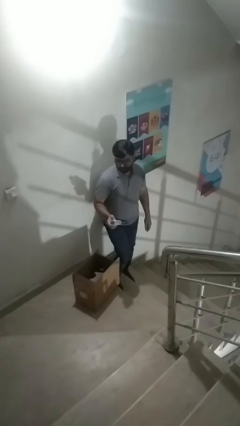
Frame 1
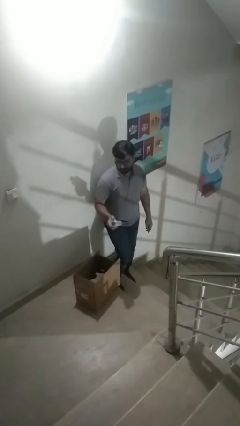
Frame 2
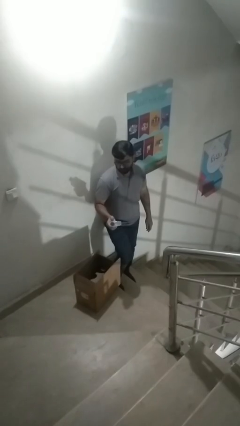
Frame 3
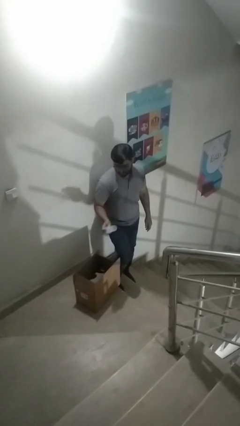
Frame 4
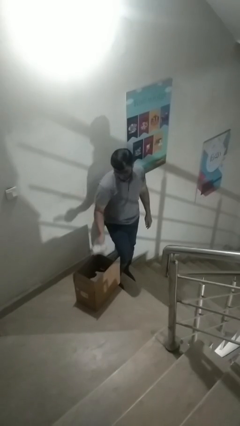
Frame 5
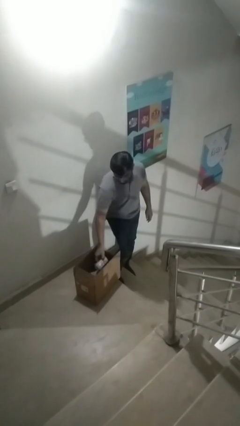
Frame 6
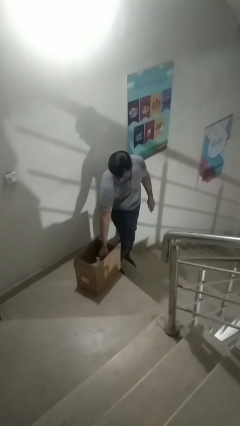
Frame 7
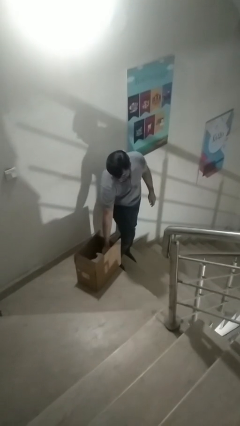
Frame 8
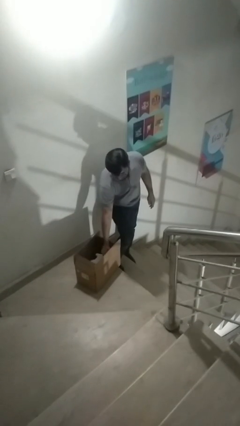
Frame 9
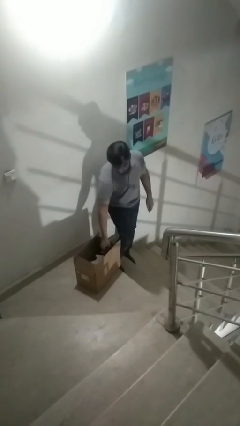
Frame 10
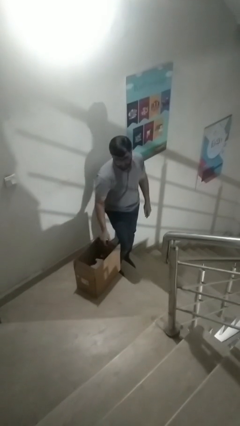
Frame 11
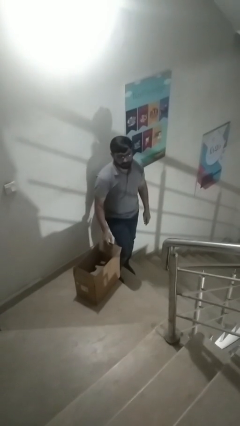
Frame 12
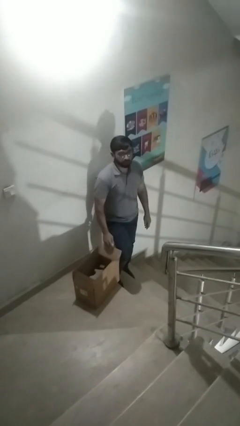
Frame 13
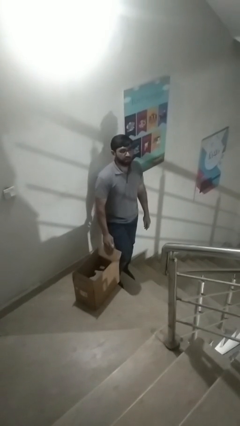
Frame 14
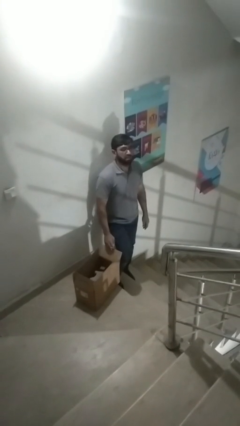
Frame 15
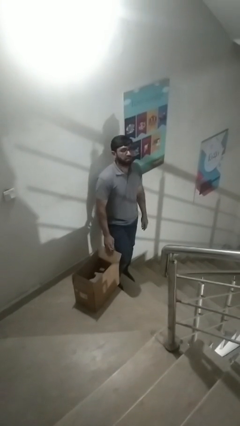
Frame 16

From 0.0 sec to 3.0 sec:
person puts object into box

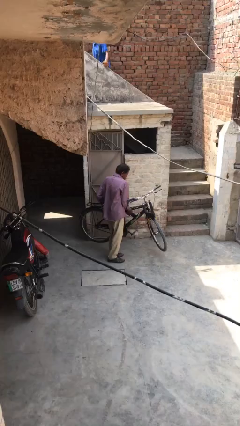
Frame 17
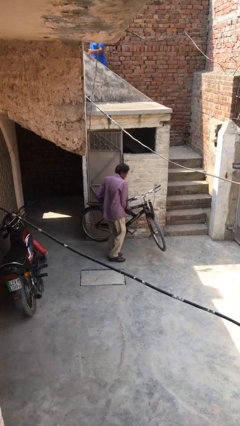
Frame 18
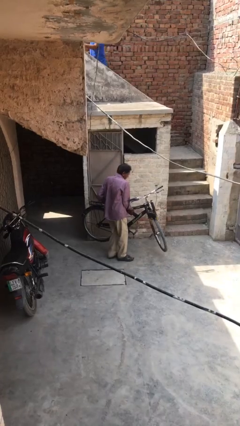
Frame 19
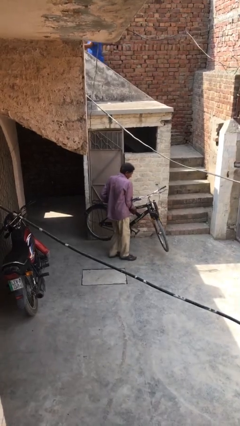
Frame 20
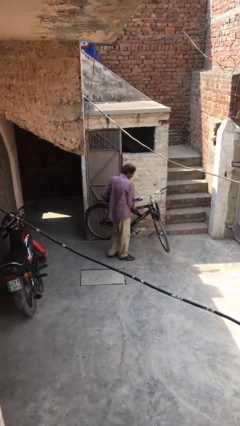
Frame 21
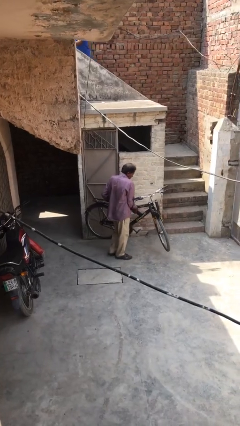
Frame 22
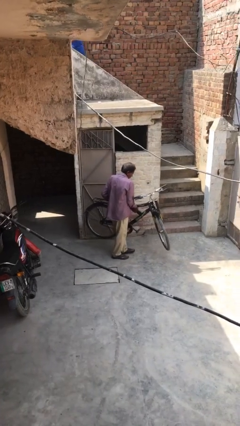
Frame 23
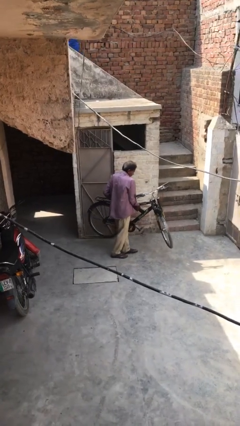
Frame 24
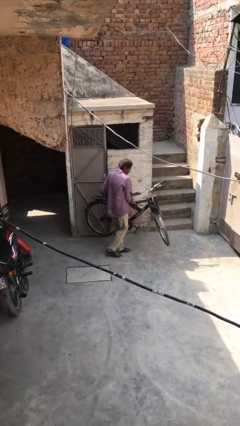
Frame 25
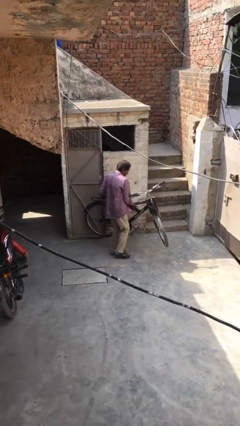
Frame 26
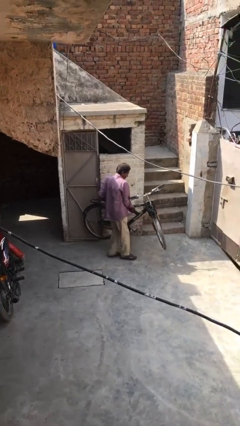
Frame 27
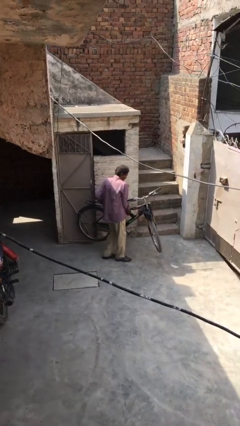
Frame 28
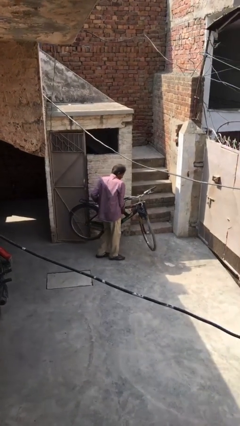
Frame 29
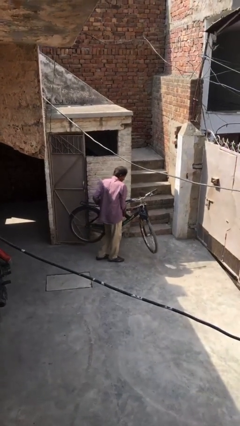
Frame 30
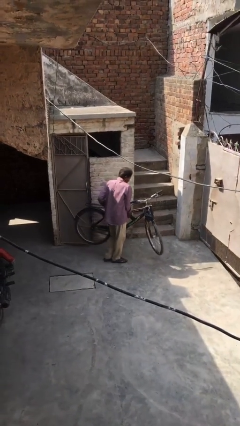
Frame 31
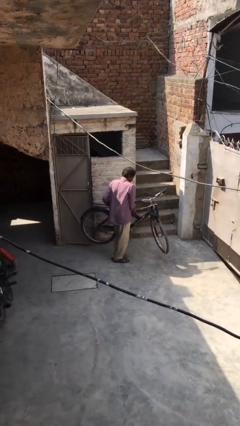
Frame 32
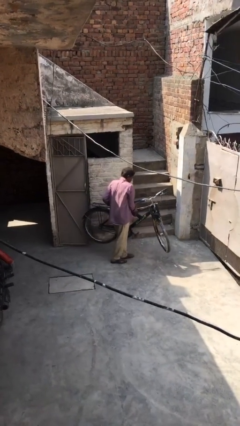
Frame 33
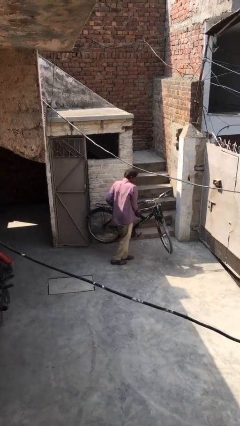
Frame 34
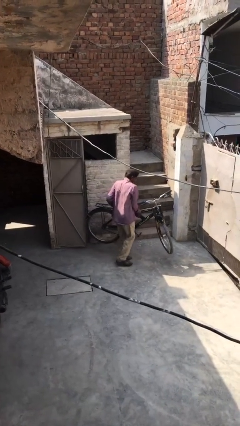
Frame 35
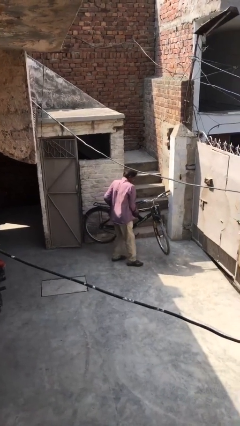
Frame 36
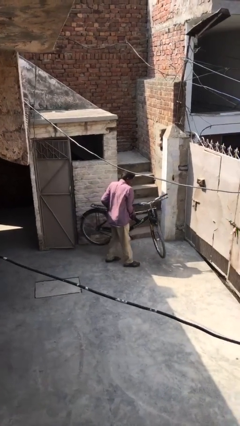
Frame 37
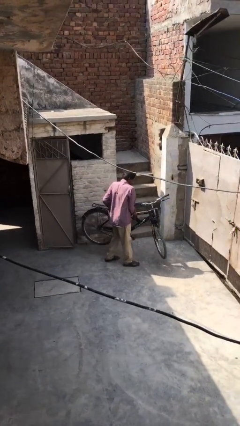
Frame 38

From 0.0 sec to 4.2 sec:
person carries heavy object

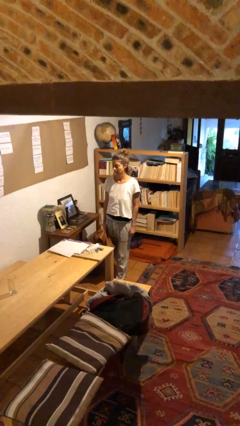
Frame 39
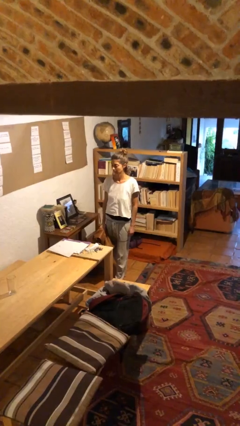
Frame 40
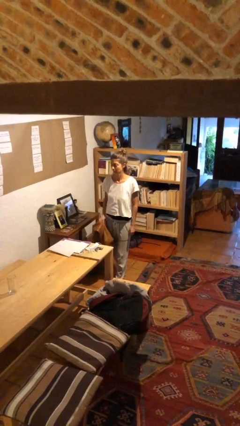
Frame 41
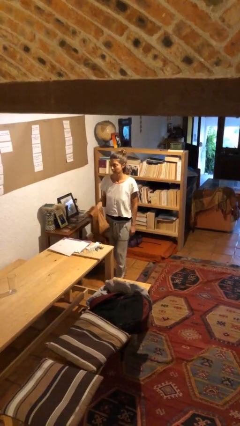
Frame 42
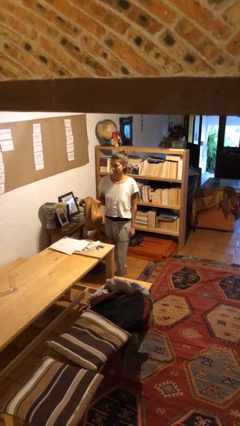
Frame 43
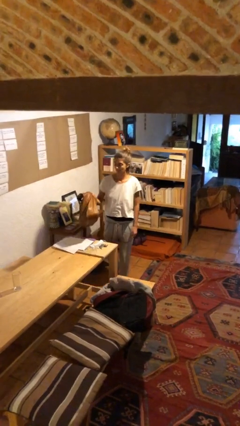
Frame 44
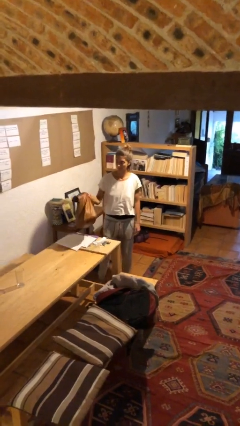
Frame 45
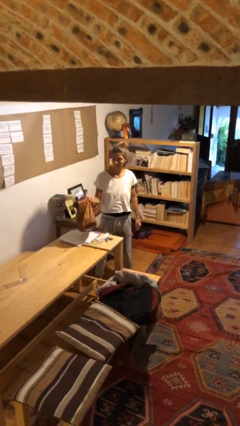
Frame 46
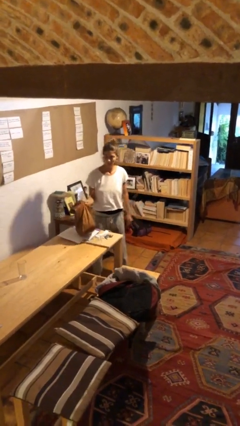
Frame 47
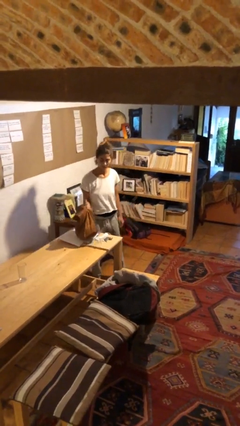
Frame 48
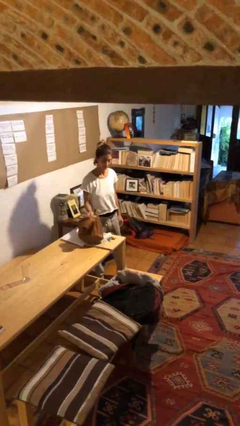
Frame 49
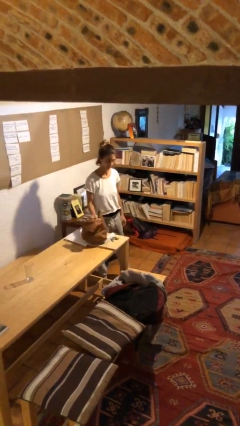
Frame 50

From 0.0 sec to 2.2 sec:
person puts down object on table

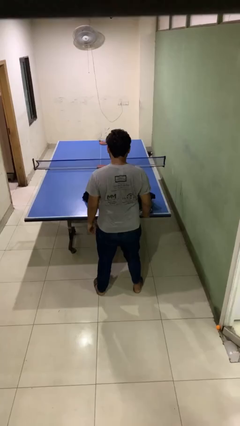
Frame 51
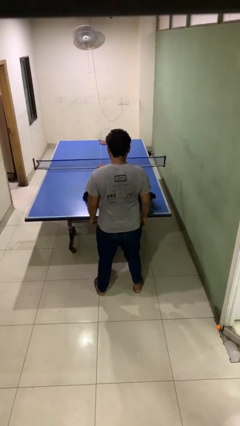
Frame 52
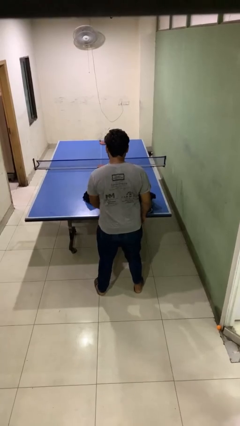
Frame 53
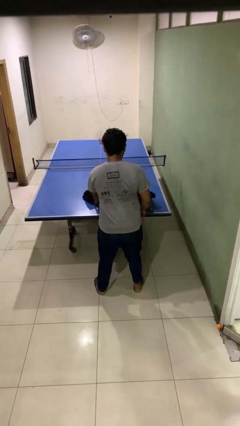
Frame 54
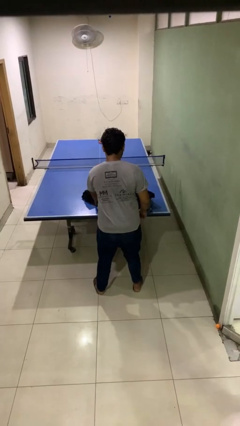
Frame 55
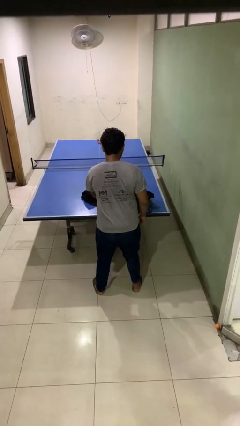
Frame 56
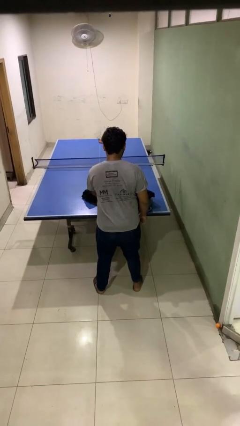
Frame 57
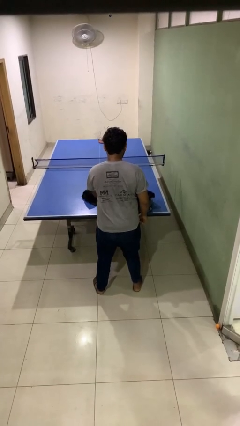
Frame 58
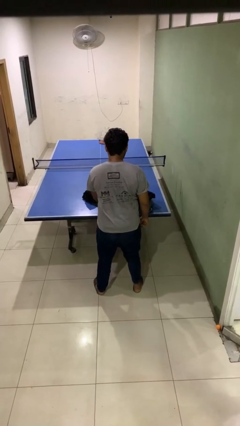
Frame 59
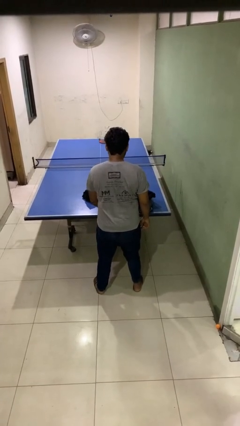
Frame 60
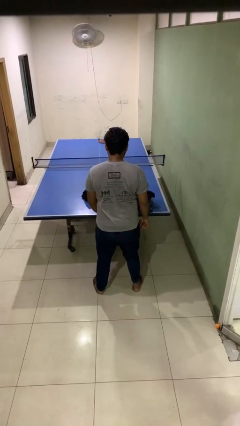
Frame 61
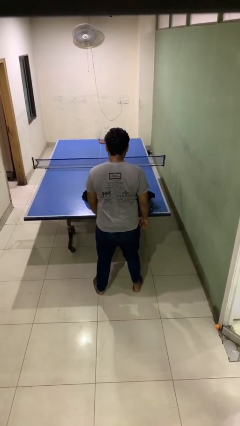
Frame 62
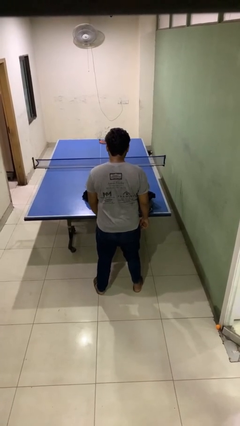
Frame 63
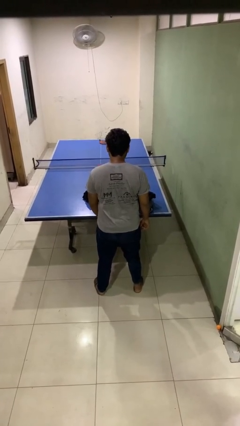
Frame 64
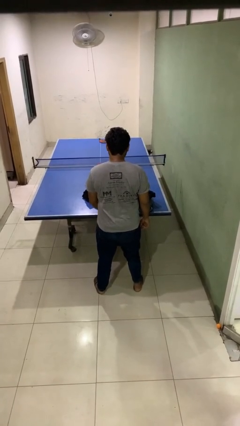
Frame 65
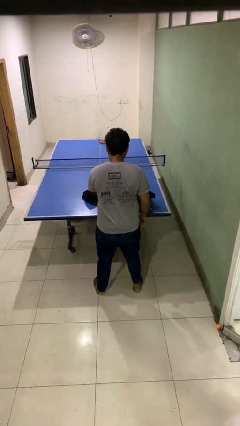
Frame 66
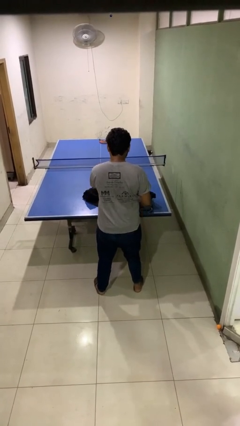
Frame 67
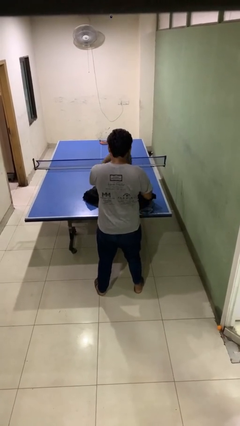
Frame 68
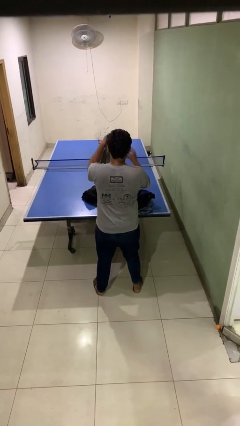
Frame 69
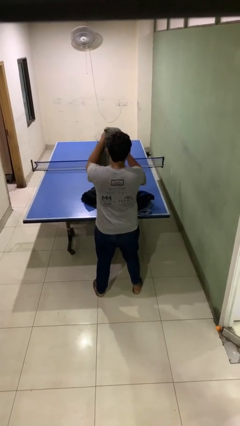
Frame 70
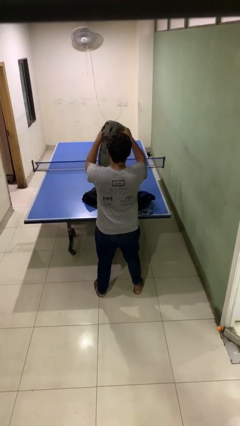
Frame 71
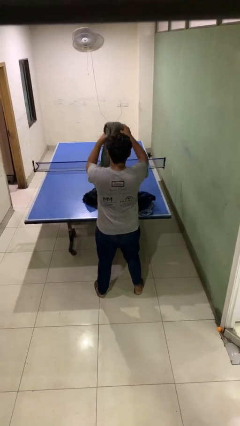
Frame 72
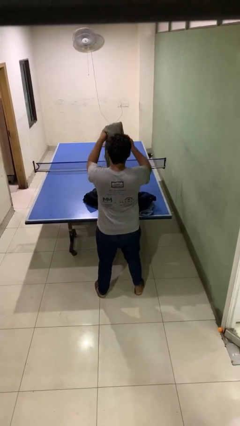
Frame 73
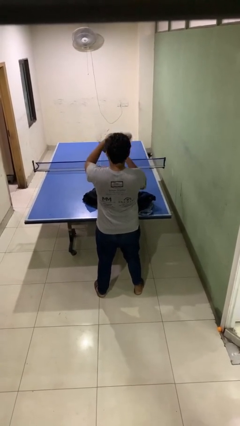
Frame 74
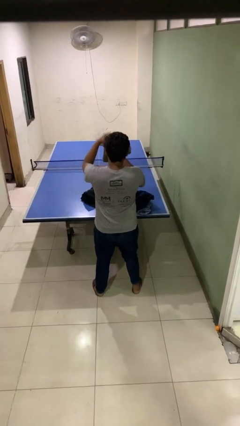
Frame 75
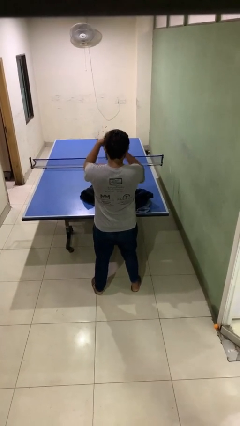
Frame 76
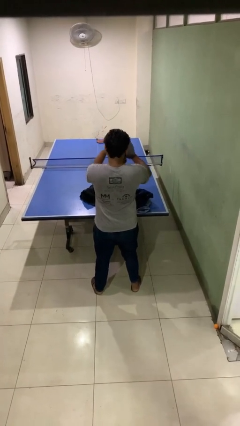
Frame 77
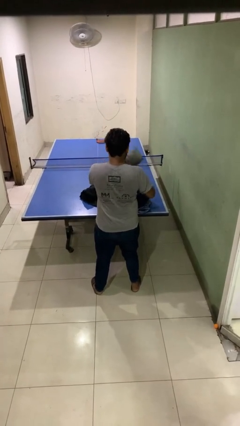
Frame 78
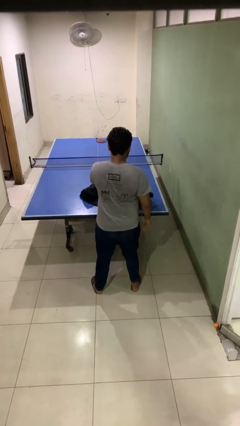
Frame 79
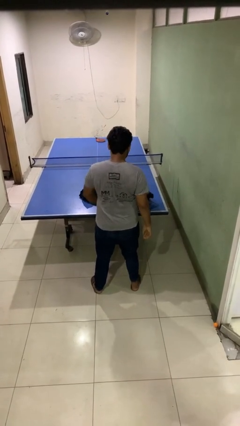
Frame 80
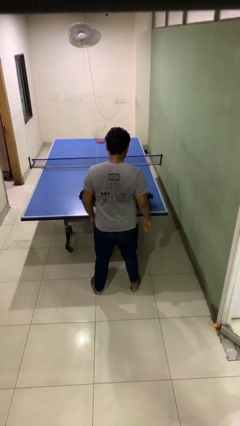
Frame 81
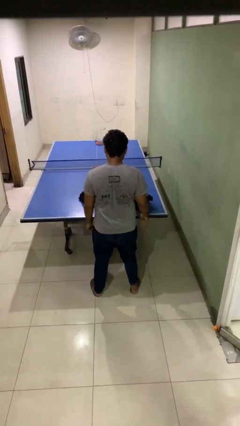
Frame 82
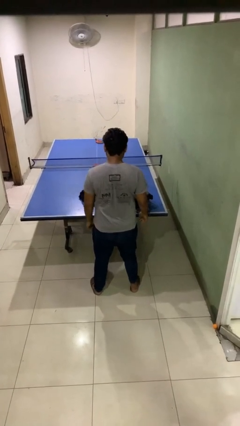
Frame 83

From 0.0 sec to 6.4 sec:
person folds pants

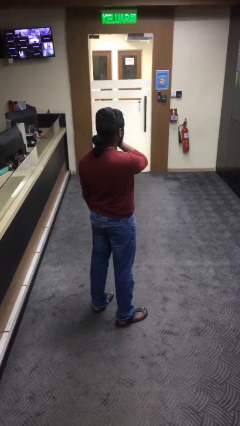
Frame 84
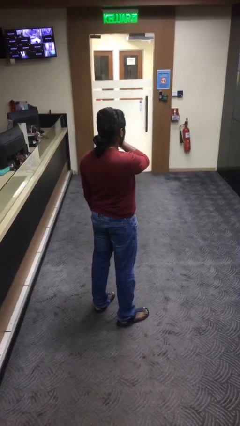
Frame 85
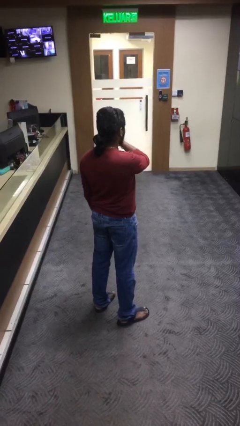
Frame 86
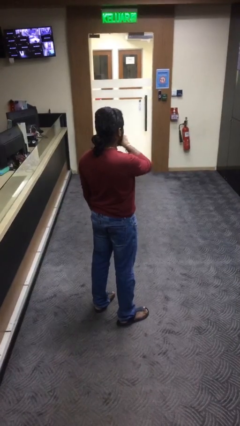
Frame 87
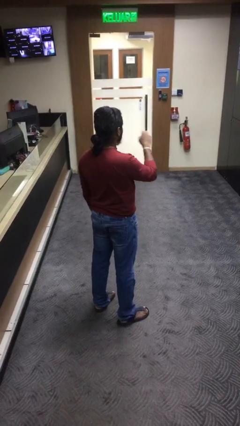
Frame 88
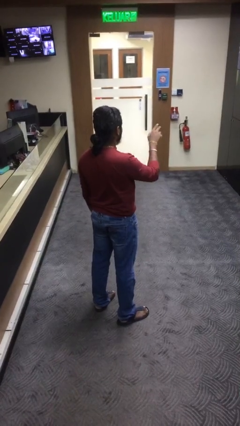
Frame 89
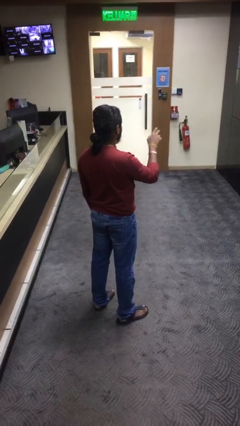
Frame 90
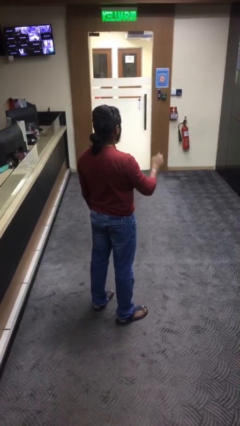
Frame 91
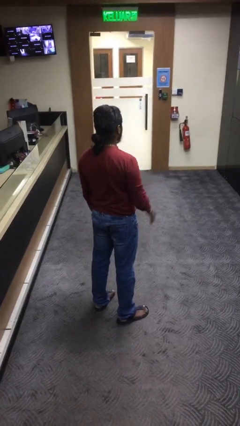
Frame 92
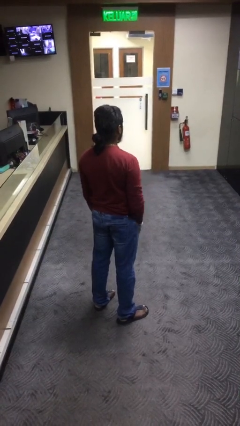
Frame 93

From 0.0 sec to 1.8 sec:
person gestures swipe right
